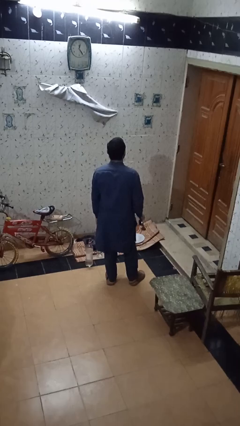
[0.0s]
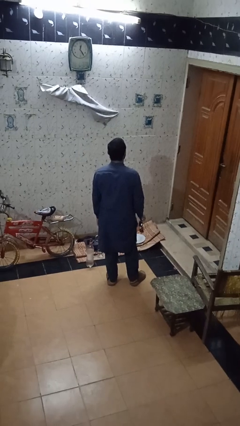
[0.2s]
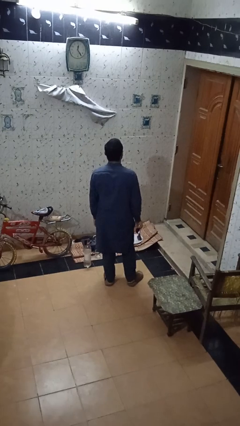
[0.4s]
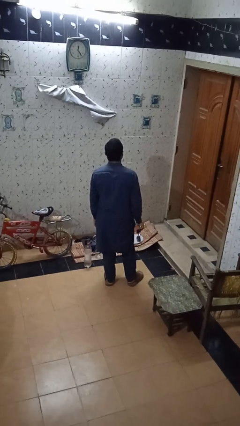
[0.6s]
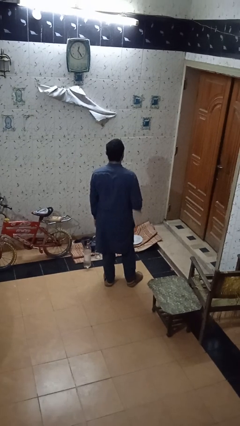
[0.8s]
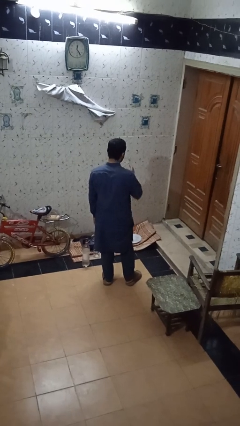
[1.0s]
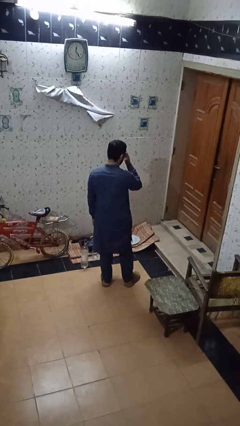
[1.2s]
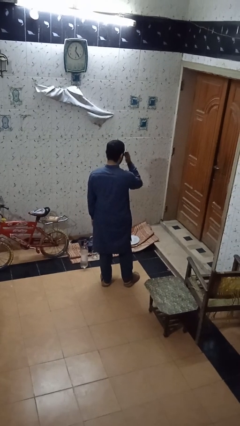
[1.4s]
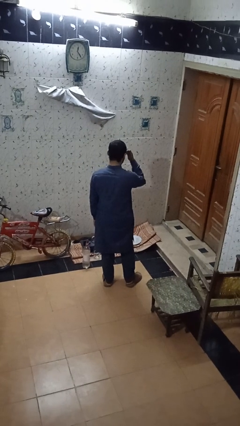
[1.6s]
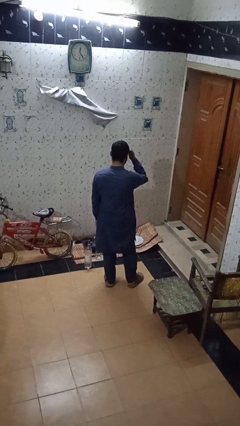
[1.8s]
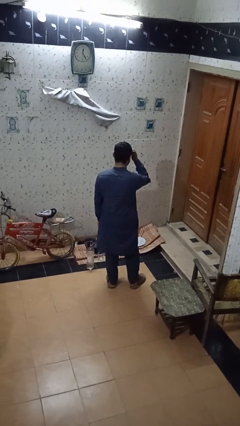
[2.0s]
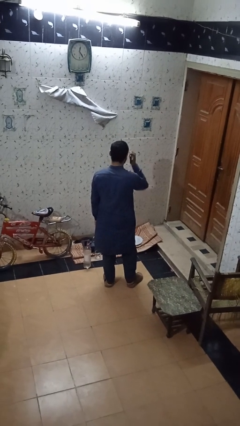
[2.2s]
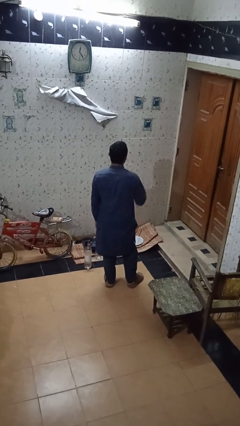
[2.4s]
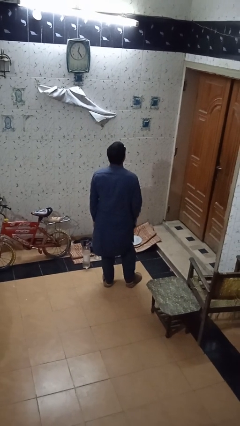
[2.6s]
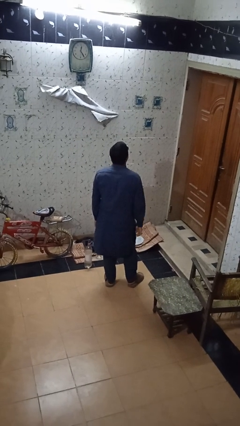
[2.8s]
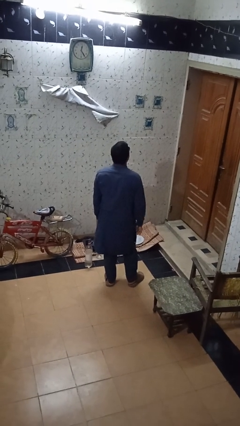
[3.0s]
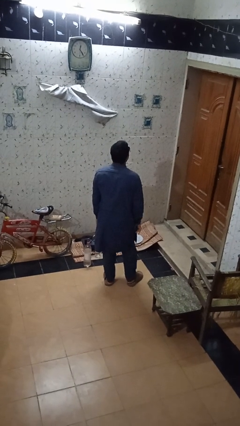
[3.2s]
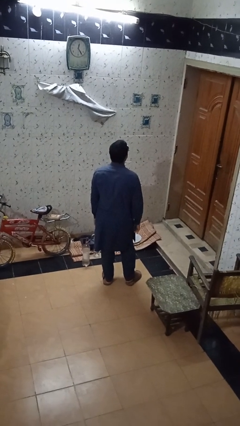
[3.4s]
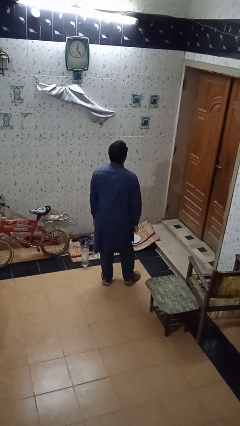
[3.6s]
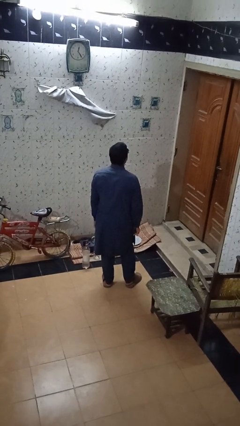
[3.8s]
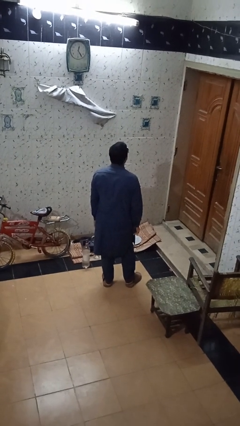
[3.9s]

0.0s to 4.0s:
person puts on sunglasses

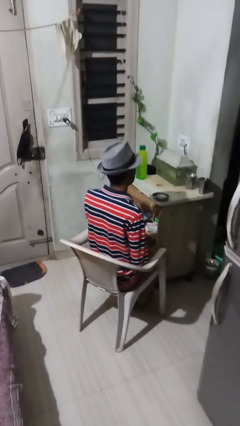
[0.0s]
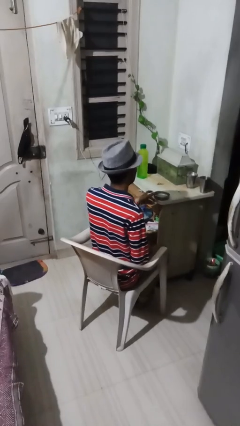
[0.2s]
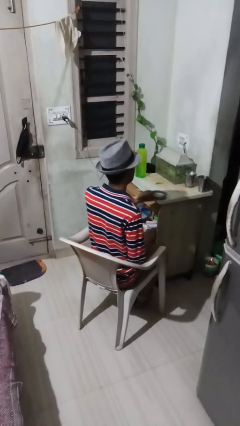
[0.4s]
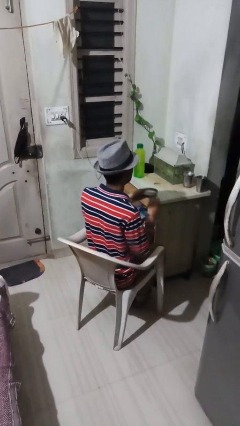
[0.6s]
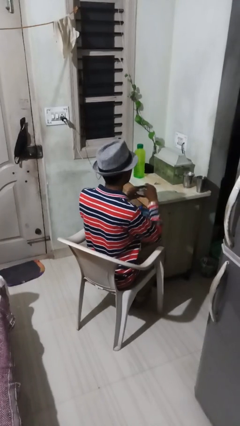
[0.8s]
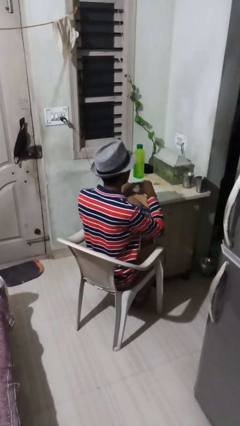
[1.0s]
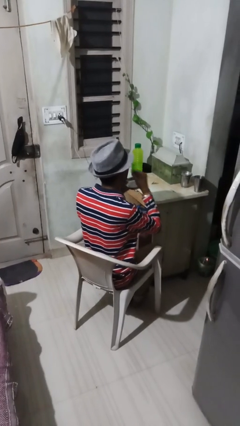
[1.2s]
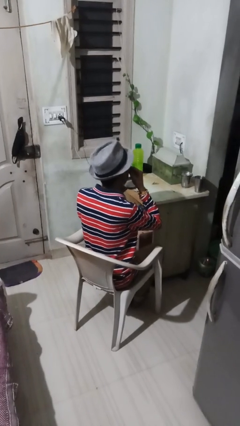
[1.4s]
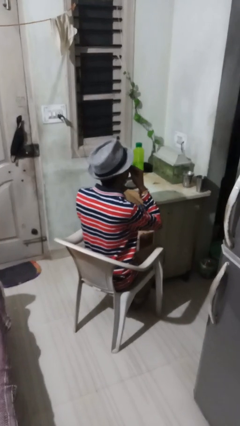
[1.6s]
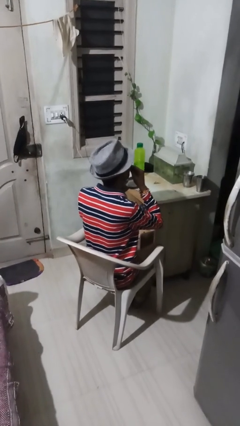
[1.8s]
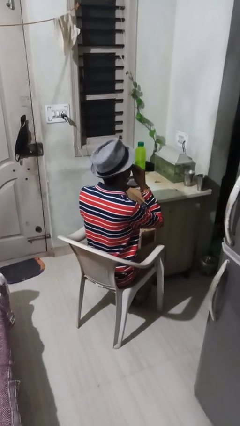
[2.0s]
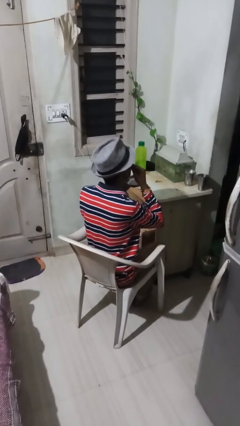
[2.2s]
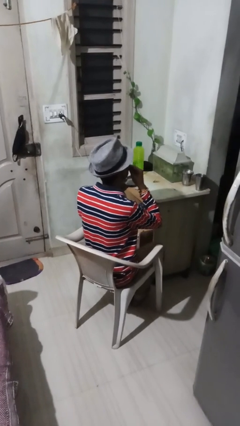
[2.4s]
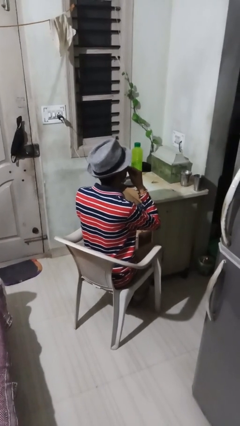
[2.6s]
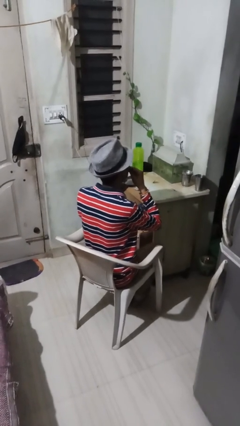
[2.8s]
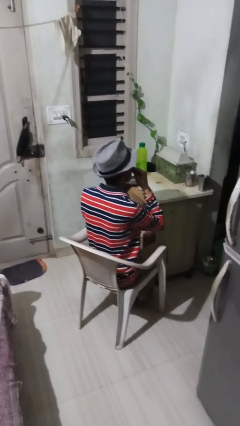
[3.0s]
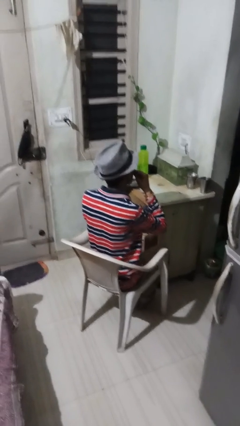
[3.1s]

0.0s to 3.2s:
person eats with hands

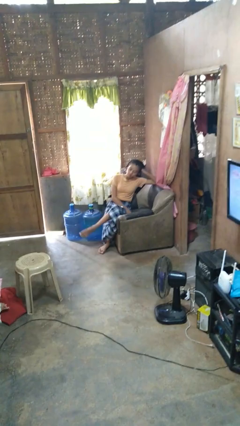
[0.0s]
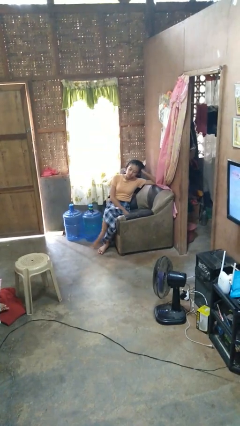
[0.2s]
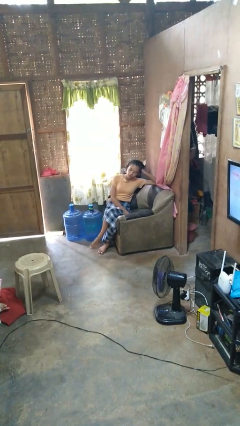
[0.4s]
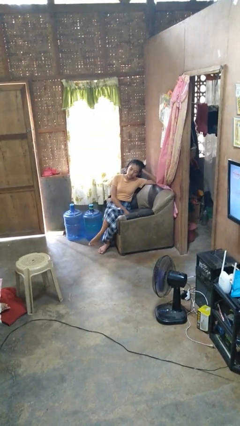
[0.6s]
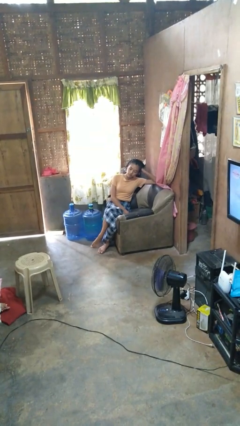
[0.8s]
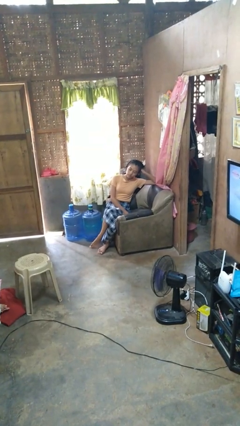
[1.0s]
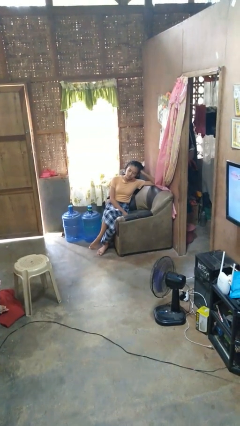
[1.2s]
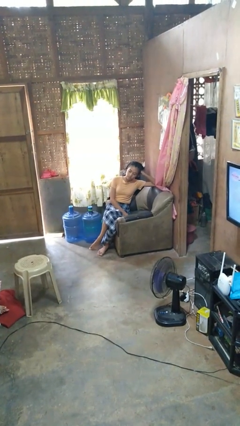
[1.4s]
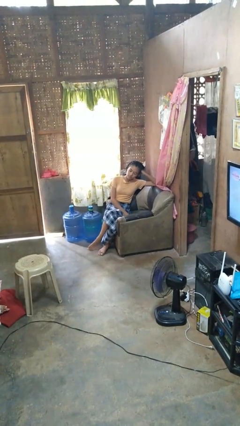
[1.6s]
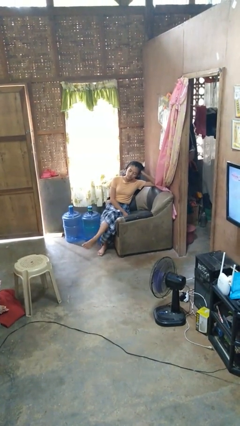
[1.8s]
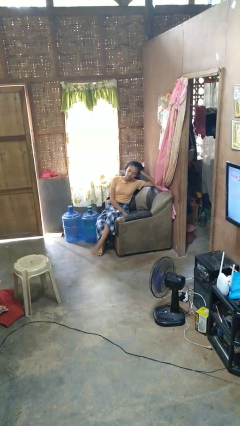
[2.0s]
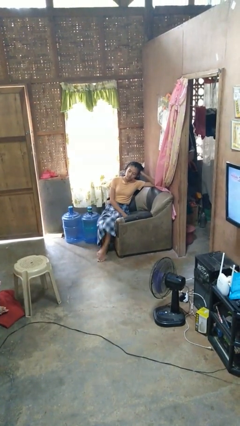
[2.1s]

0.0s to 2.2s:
person crosses legs

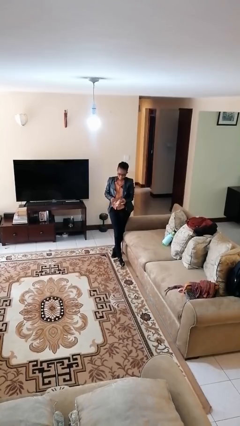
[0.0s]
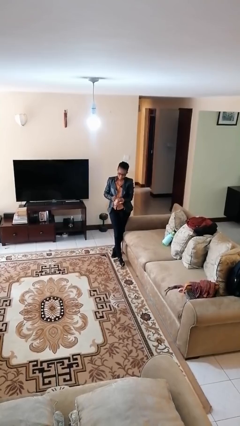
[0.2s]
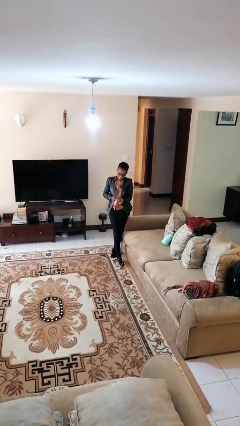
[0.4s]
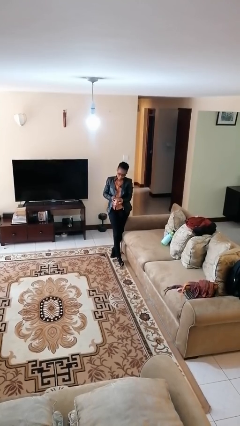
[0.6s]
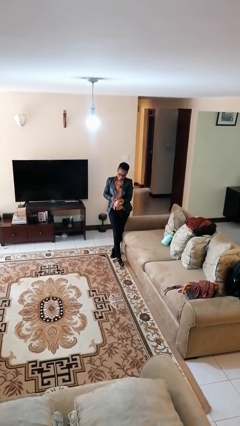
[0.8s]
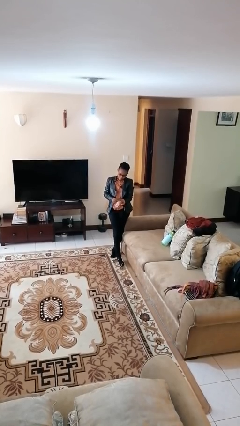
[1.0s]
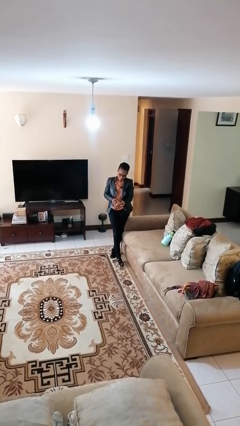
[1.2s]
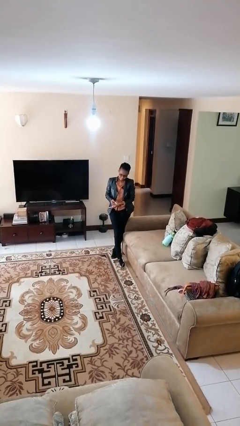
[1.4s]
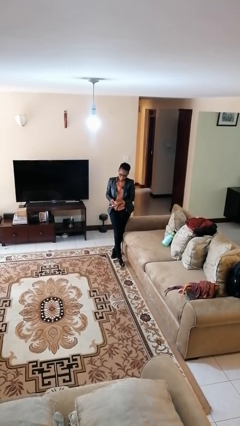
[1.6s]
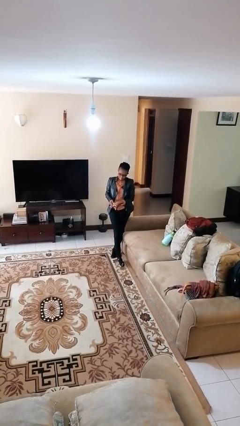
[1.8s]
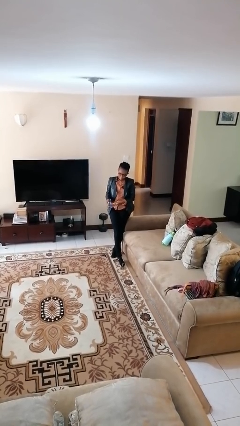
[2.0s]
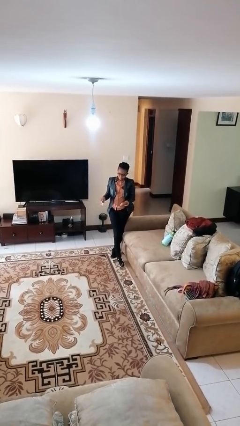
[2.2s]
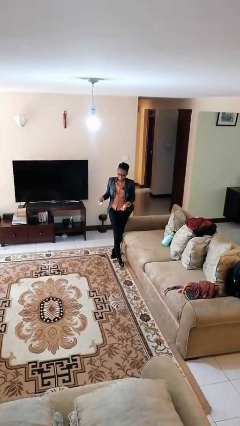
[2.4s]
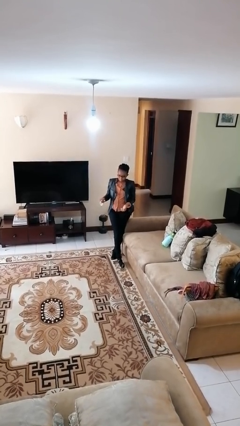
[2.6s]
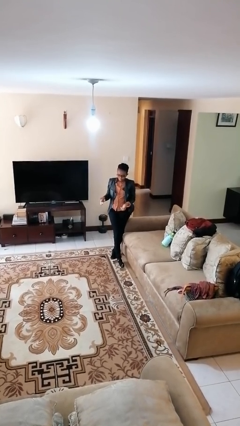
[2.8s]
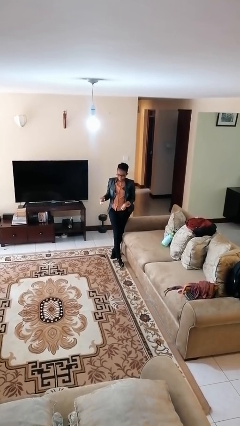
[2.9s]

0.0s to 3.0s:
person takes off wristwatch

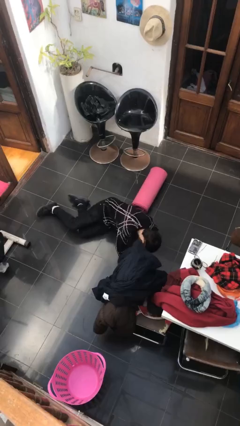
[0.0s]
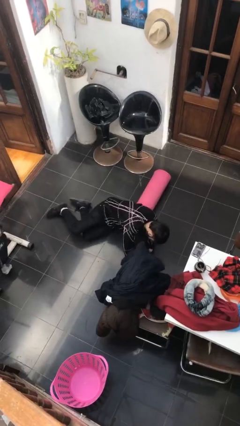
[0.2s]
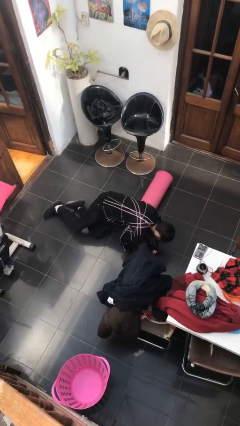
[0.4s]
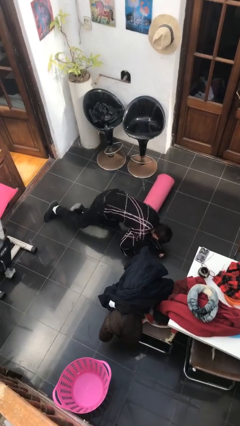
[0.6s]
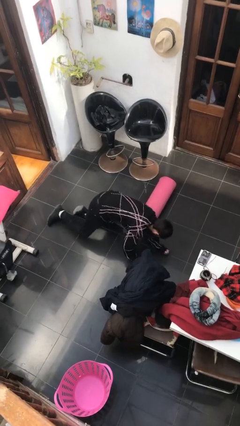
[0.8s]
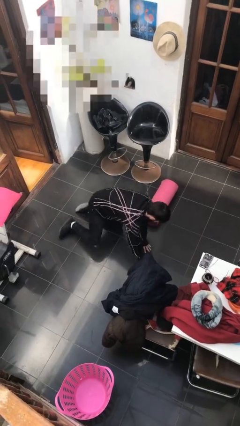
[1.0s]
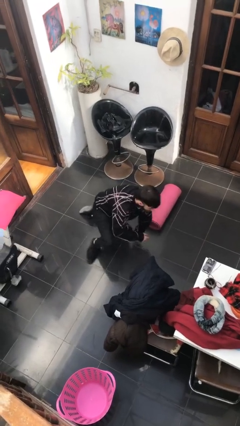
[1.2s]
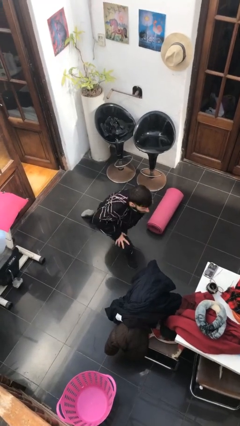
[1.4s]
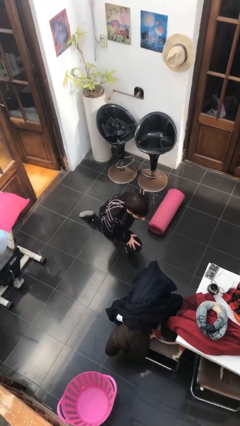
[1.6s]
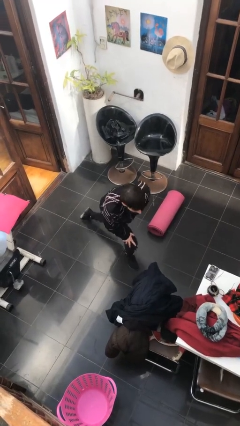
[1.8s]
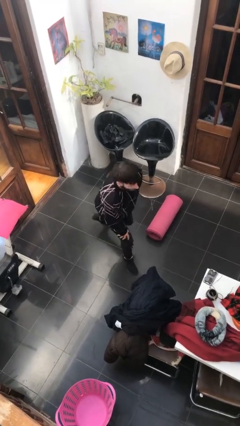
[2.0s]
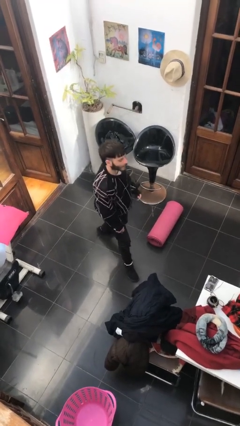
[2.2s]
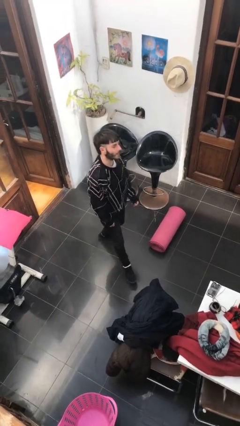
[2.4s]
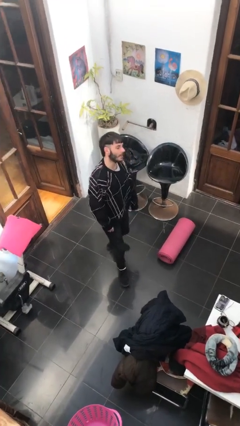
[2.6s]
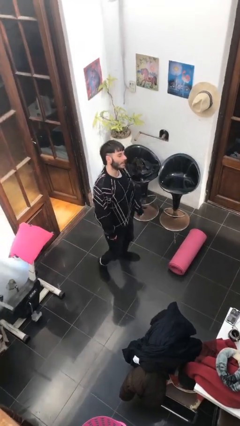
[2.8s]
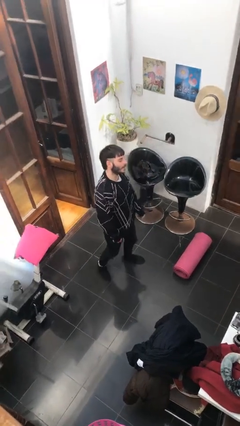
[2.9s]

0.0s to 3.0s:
person stands up from floor

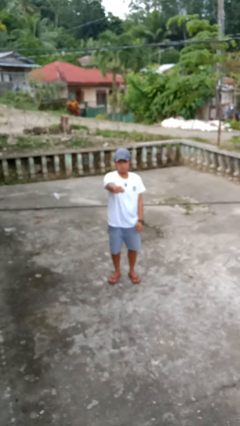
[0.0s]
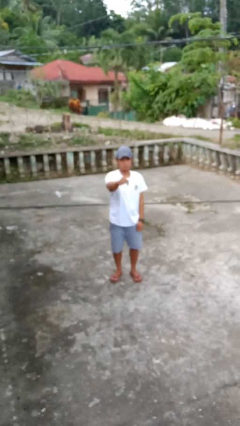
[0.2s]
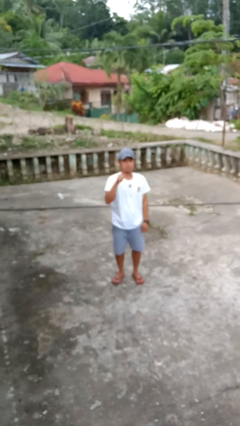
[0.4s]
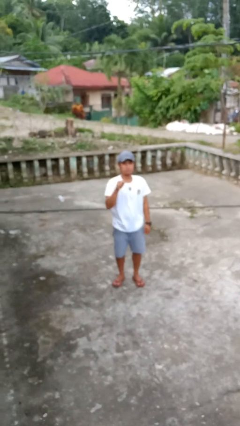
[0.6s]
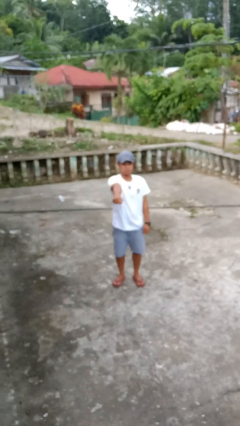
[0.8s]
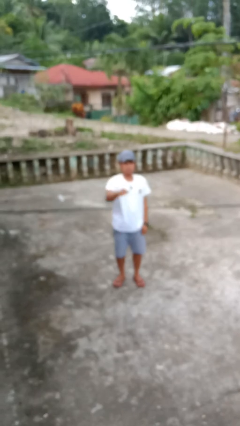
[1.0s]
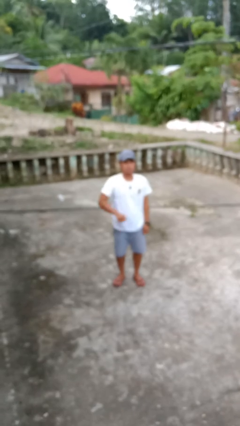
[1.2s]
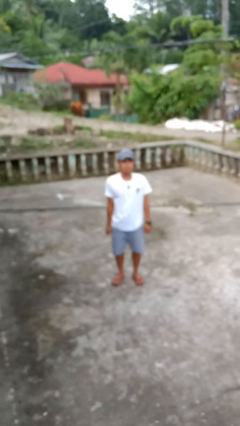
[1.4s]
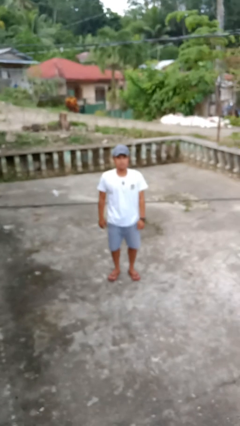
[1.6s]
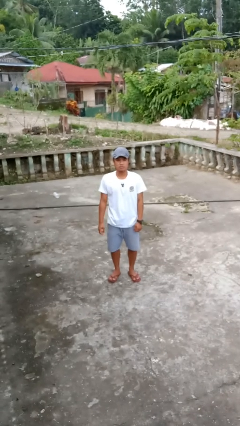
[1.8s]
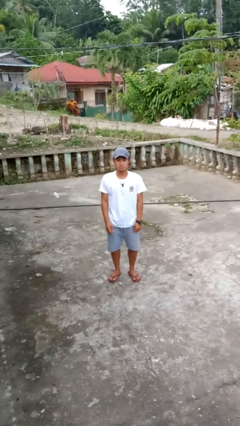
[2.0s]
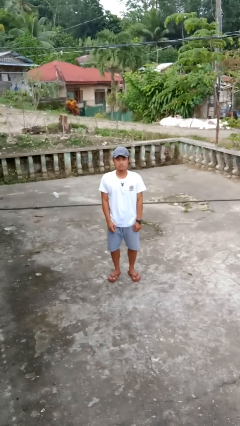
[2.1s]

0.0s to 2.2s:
person punches
